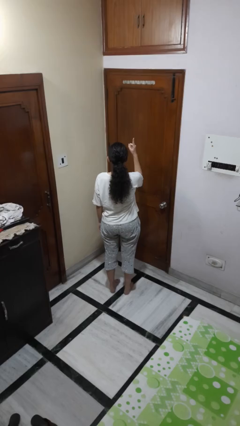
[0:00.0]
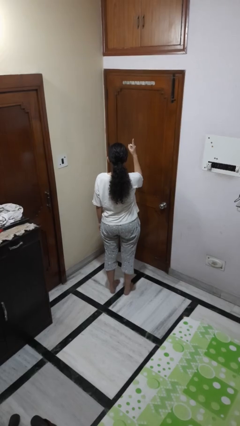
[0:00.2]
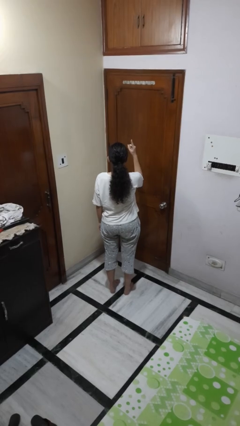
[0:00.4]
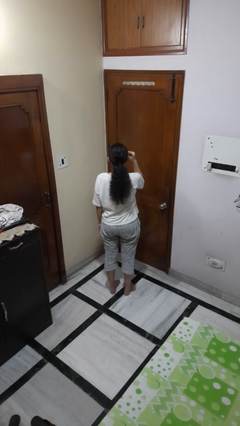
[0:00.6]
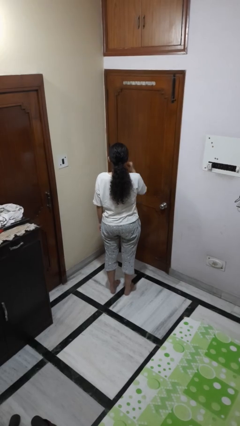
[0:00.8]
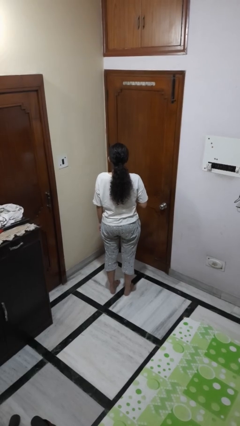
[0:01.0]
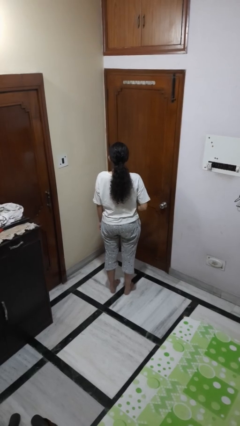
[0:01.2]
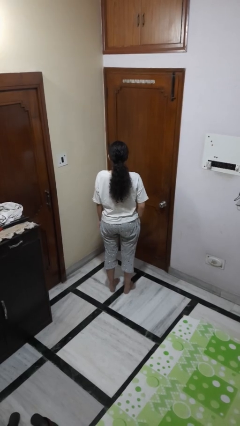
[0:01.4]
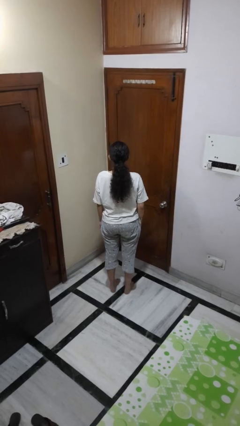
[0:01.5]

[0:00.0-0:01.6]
person gestures number one

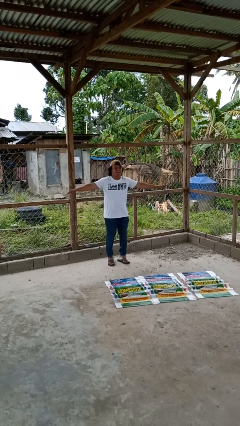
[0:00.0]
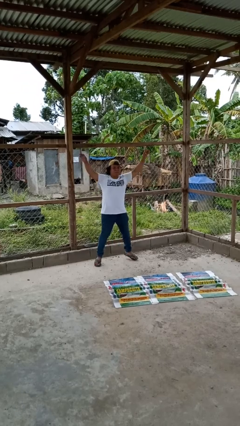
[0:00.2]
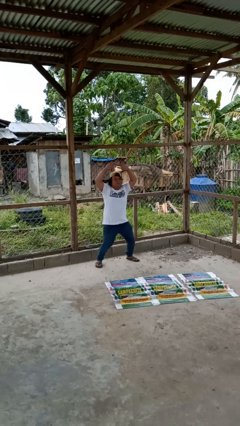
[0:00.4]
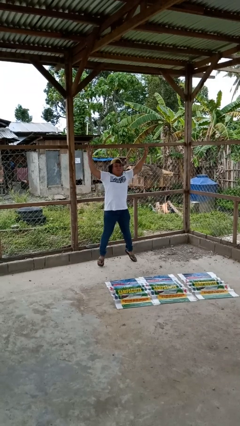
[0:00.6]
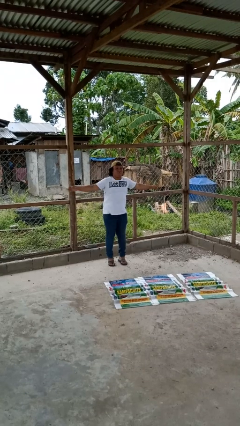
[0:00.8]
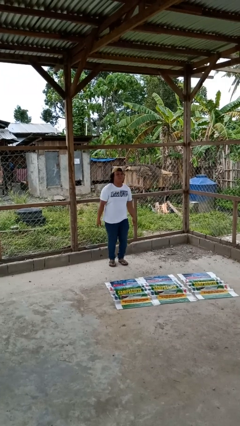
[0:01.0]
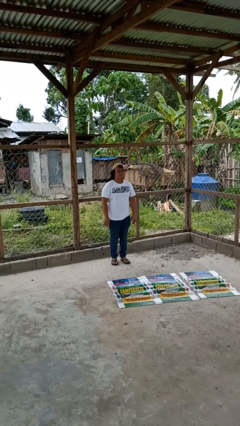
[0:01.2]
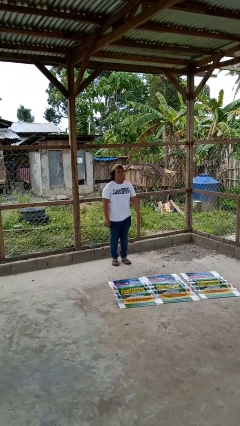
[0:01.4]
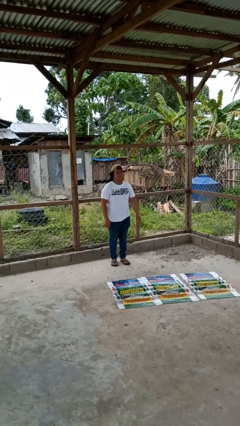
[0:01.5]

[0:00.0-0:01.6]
person exercises with jumping jacks

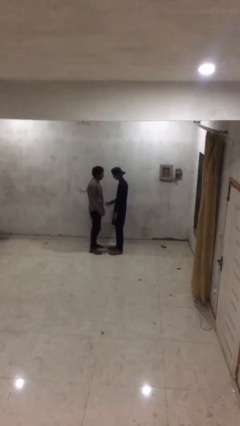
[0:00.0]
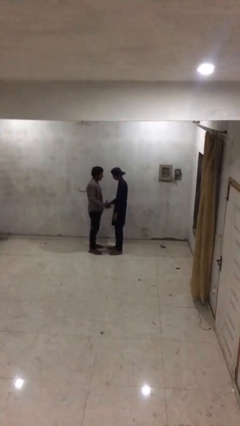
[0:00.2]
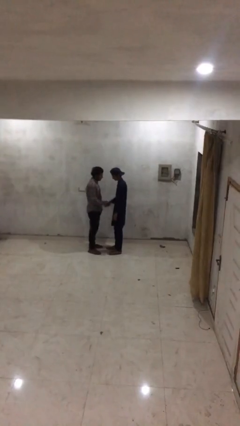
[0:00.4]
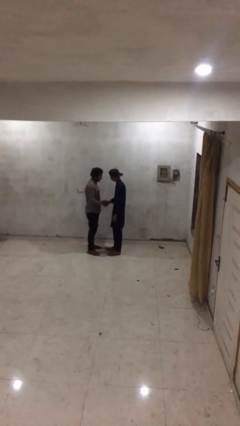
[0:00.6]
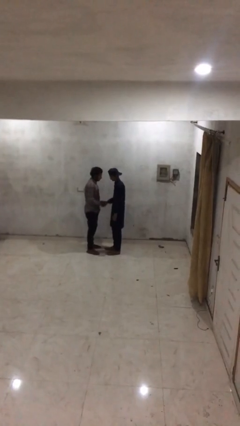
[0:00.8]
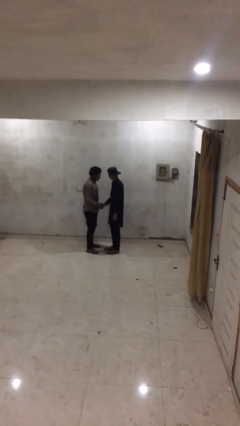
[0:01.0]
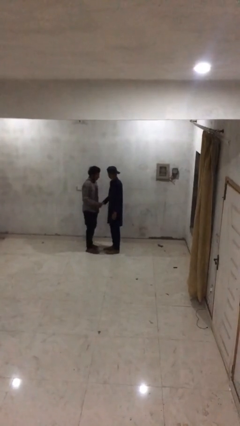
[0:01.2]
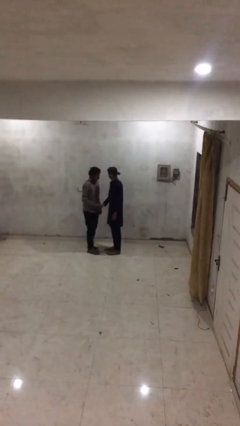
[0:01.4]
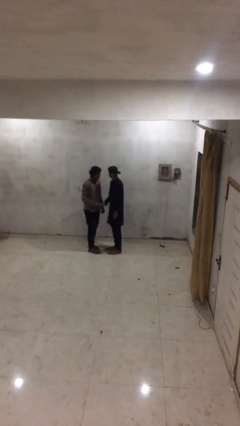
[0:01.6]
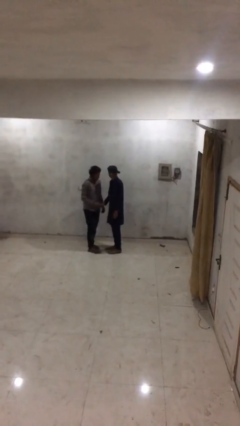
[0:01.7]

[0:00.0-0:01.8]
person shakes hand

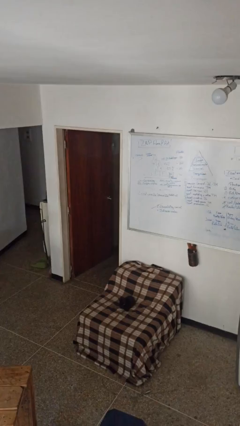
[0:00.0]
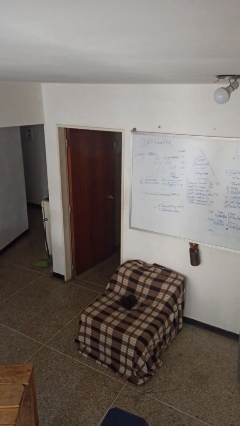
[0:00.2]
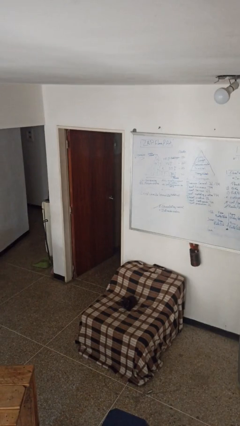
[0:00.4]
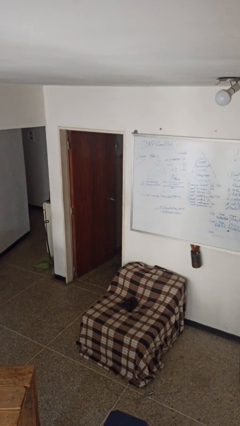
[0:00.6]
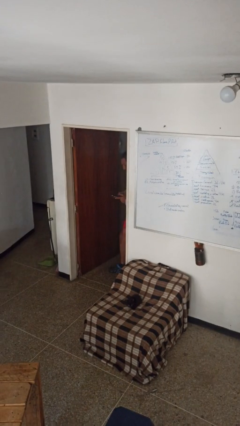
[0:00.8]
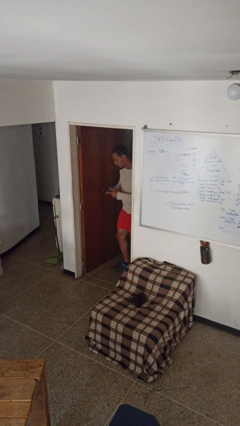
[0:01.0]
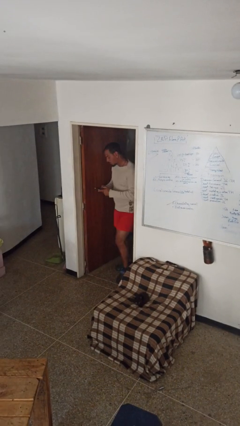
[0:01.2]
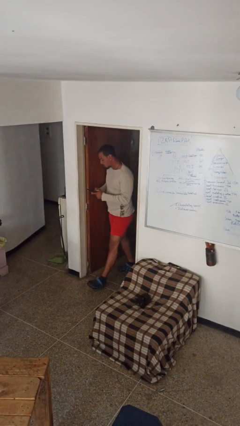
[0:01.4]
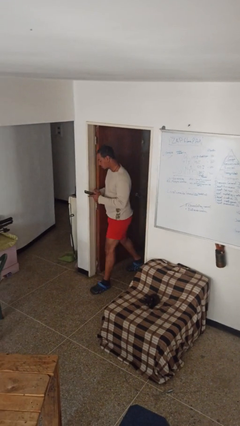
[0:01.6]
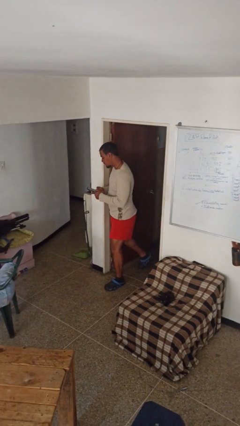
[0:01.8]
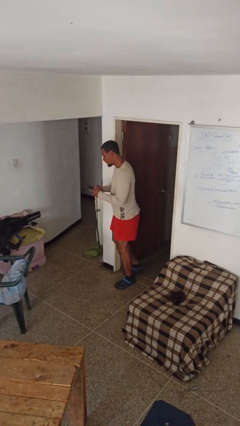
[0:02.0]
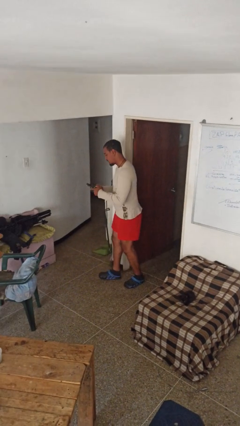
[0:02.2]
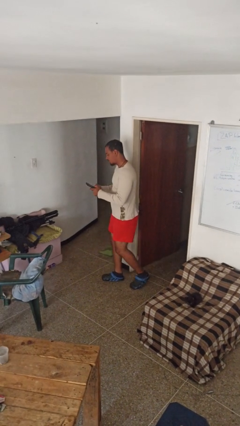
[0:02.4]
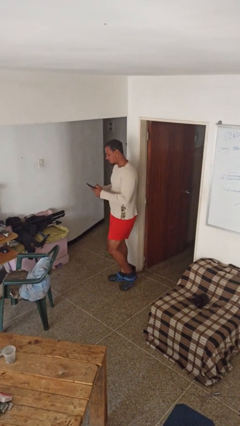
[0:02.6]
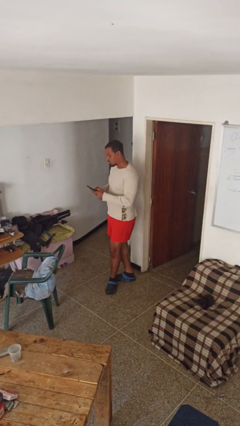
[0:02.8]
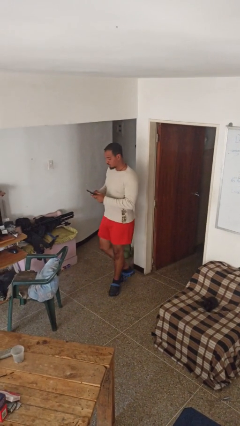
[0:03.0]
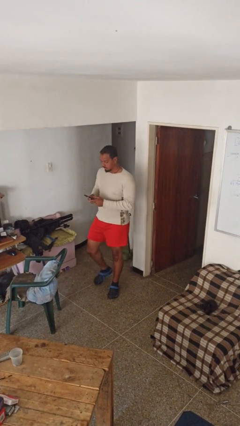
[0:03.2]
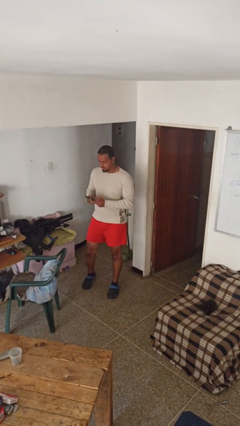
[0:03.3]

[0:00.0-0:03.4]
person enters scene through structure

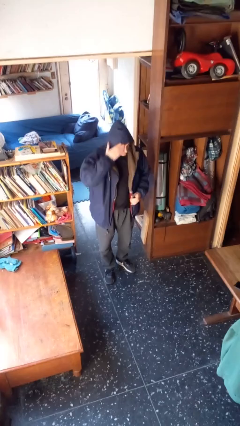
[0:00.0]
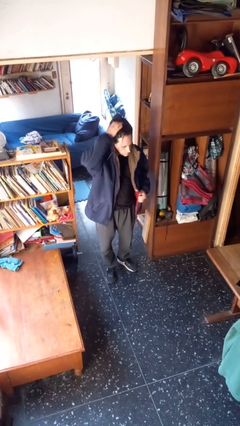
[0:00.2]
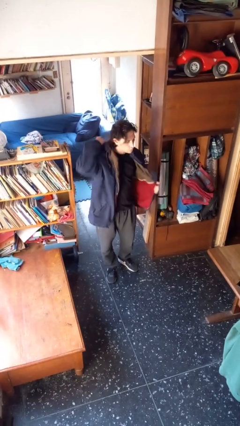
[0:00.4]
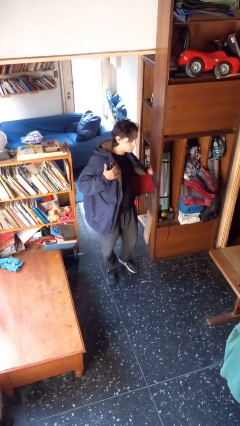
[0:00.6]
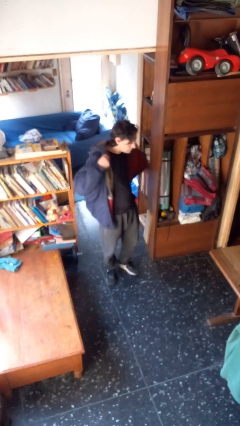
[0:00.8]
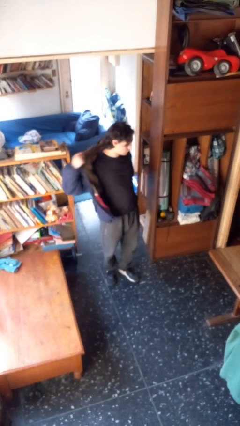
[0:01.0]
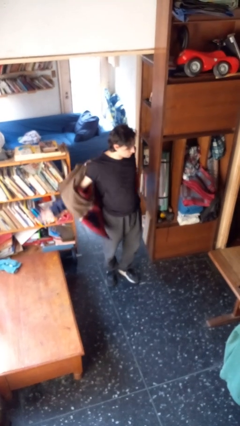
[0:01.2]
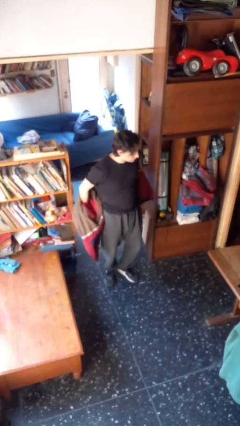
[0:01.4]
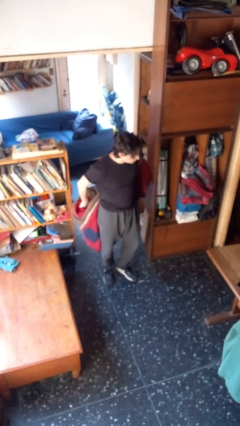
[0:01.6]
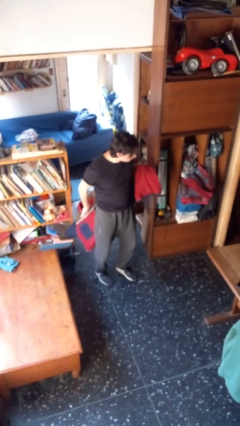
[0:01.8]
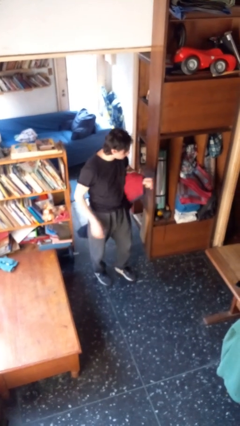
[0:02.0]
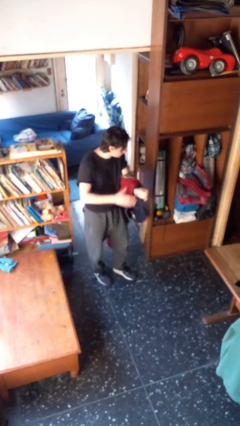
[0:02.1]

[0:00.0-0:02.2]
person takes off hoodie

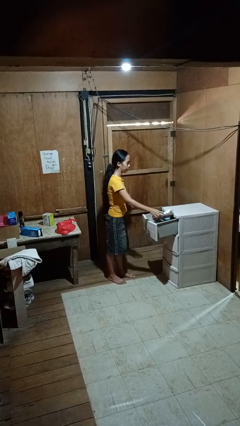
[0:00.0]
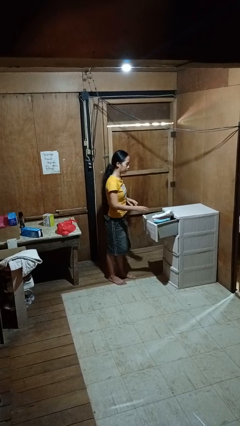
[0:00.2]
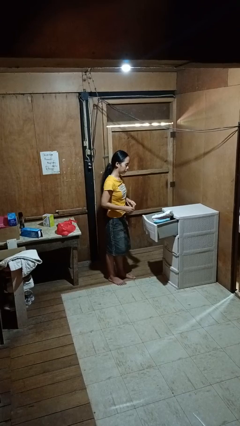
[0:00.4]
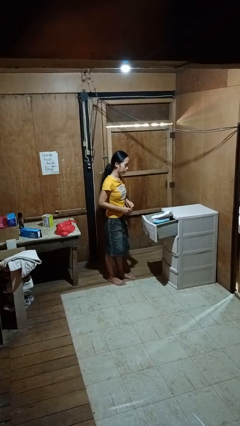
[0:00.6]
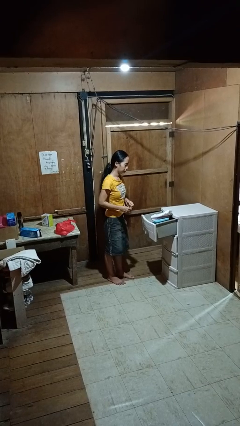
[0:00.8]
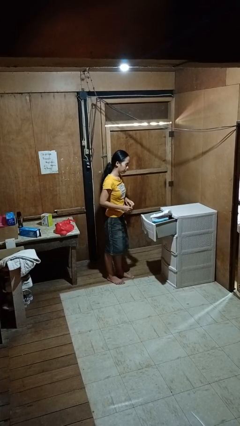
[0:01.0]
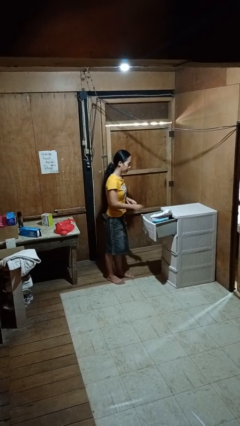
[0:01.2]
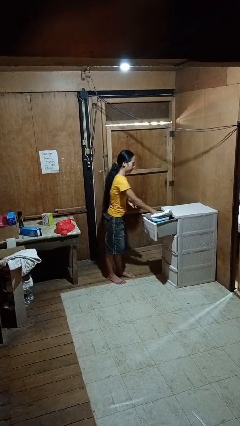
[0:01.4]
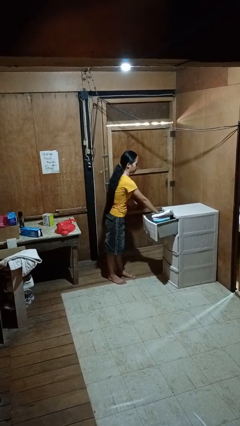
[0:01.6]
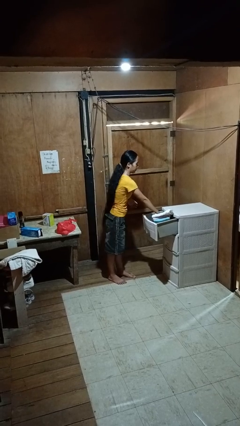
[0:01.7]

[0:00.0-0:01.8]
person puts clothes into dresser

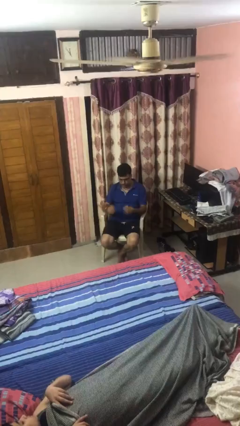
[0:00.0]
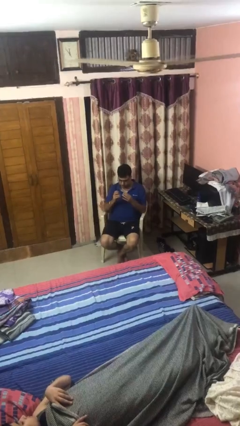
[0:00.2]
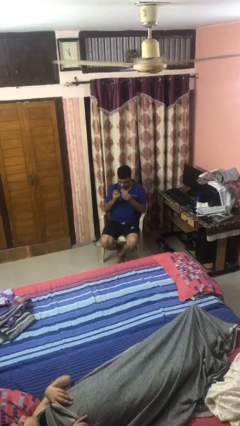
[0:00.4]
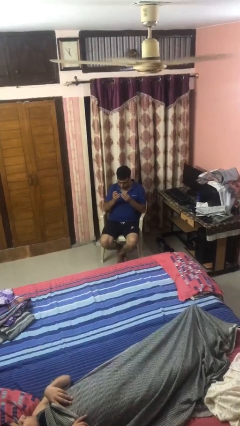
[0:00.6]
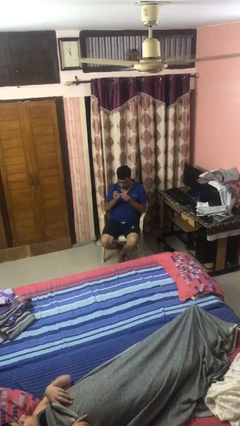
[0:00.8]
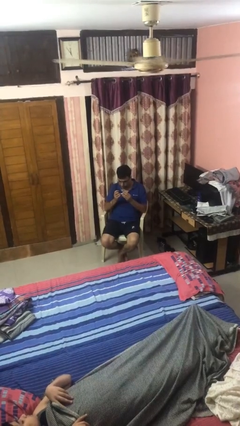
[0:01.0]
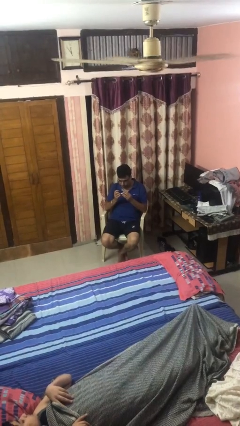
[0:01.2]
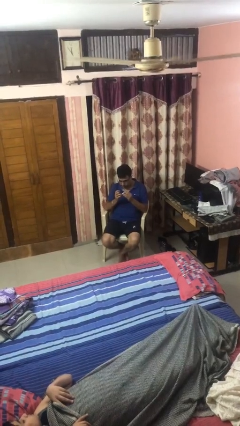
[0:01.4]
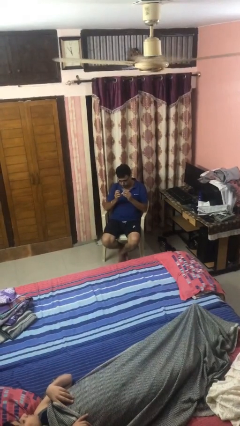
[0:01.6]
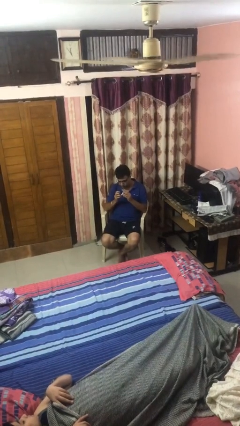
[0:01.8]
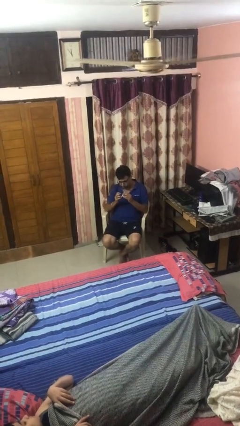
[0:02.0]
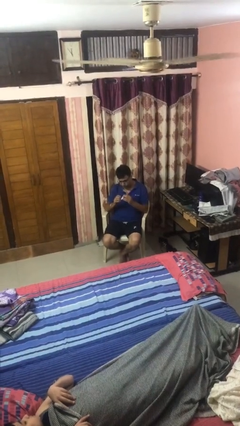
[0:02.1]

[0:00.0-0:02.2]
person clips fingernails

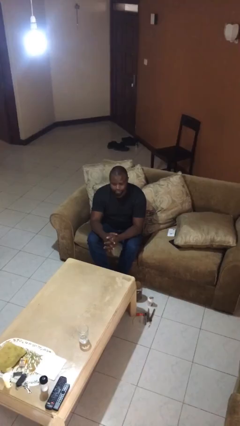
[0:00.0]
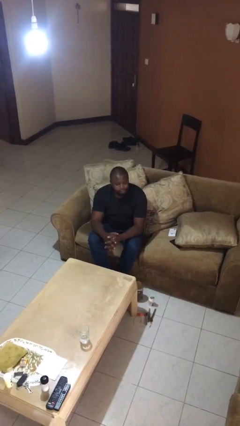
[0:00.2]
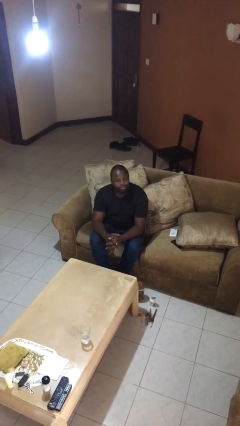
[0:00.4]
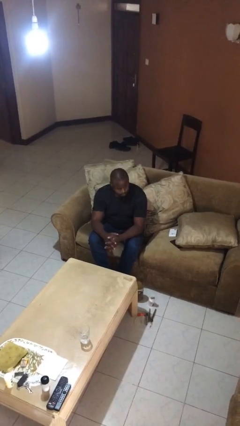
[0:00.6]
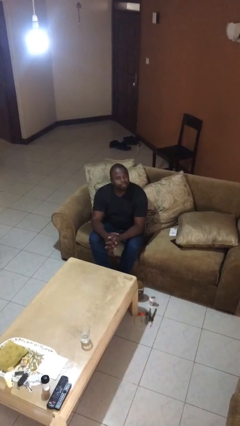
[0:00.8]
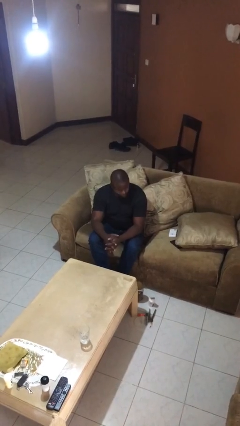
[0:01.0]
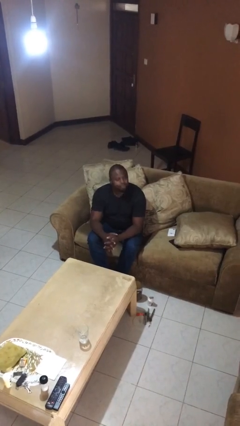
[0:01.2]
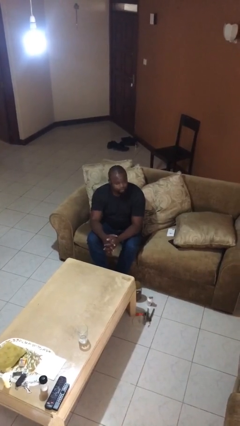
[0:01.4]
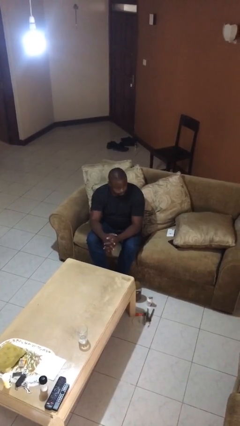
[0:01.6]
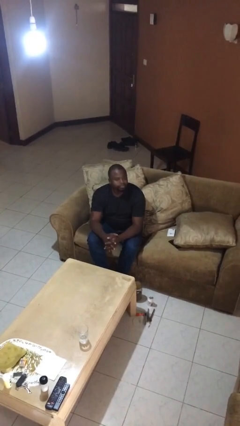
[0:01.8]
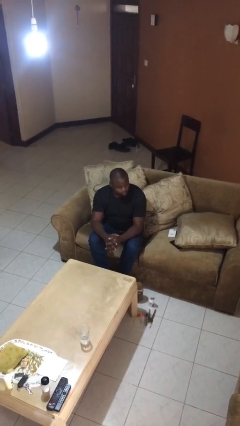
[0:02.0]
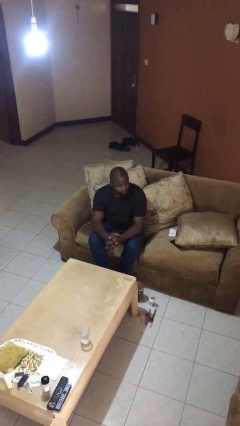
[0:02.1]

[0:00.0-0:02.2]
person nods head
